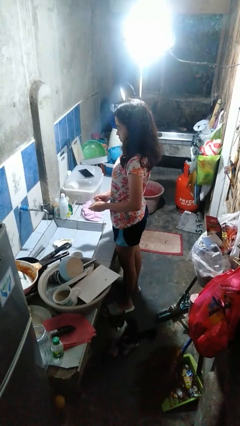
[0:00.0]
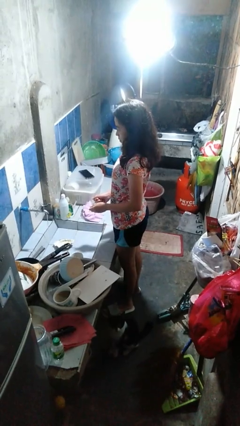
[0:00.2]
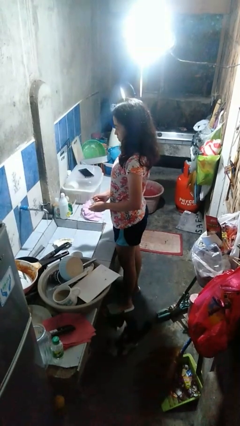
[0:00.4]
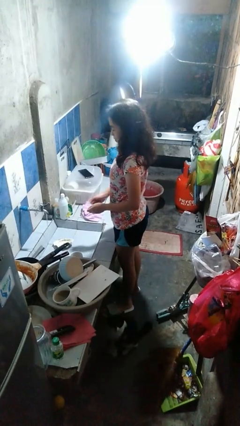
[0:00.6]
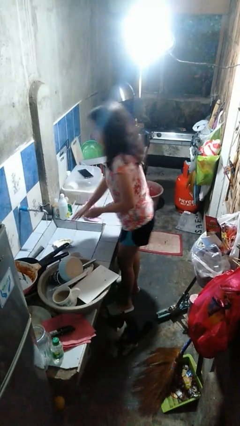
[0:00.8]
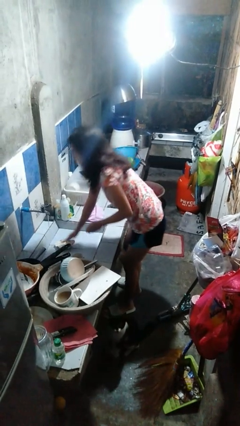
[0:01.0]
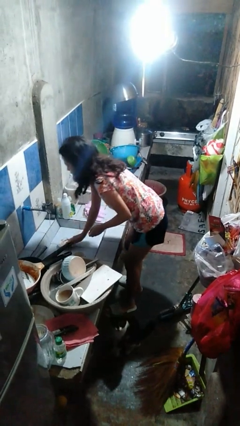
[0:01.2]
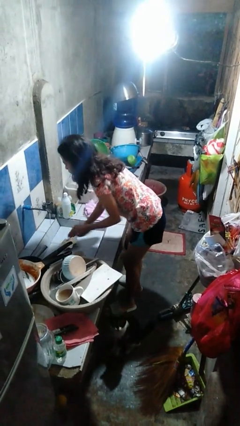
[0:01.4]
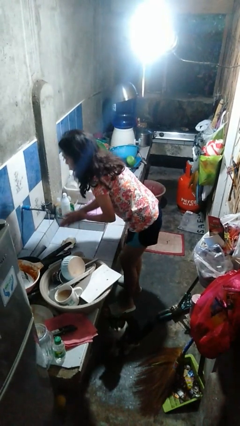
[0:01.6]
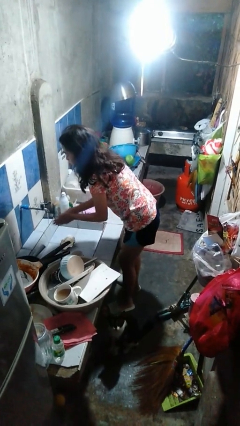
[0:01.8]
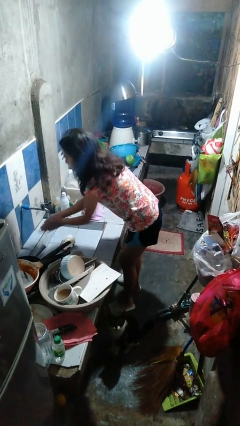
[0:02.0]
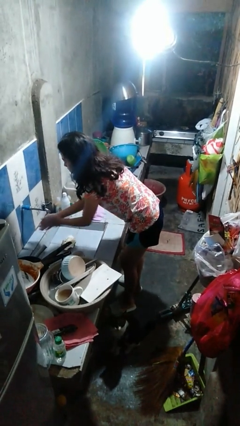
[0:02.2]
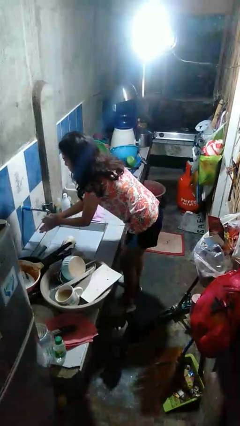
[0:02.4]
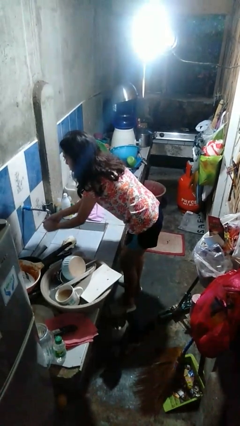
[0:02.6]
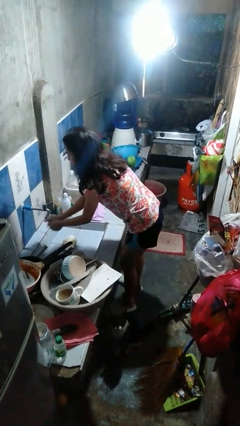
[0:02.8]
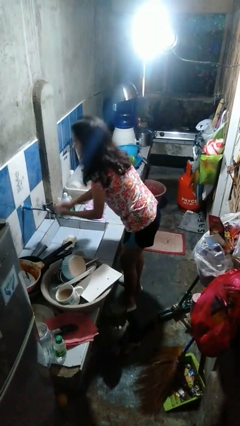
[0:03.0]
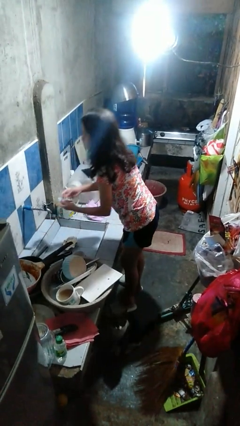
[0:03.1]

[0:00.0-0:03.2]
person washes hands

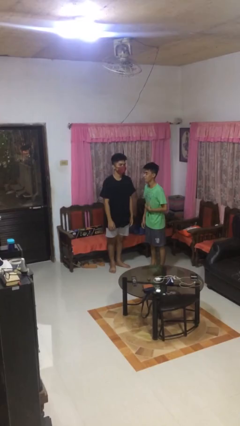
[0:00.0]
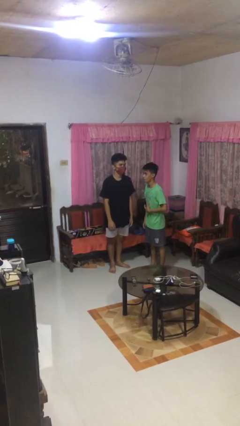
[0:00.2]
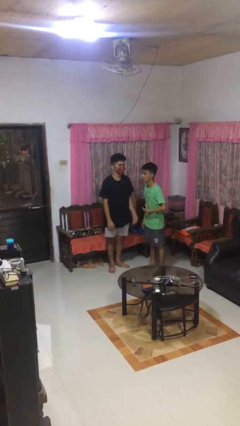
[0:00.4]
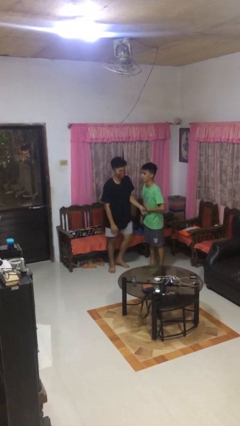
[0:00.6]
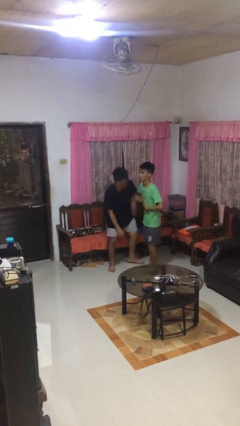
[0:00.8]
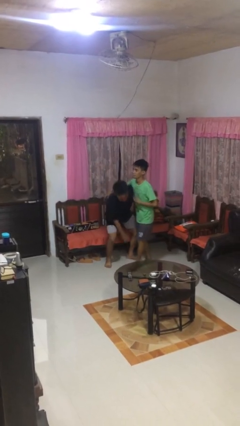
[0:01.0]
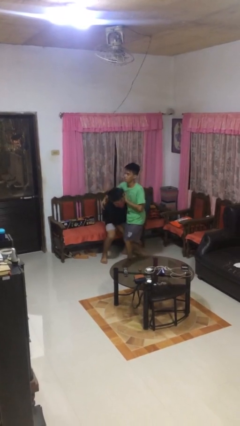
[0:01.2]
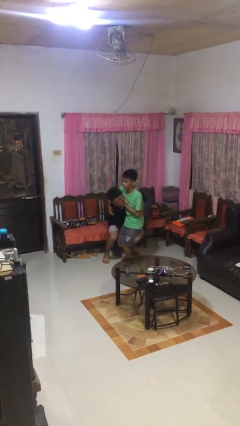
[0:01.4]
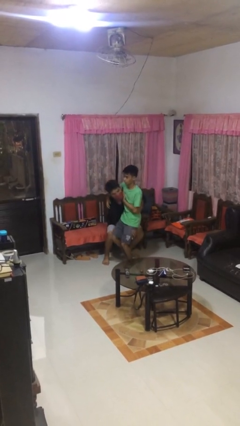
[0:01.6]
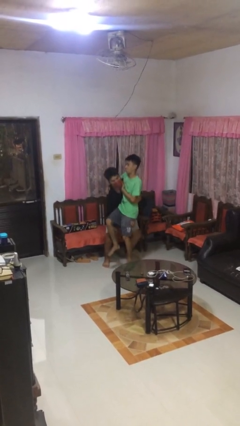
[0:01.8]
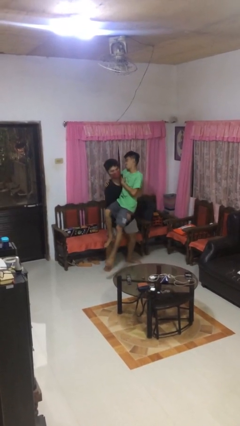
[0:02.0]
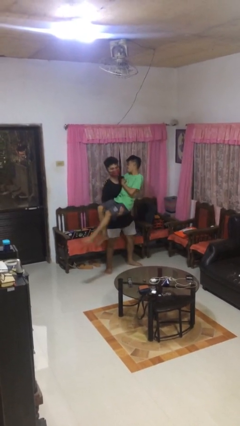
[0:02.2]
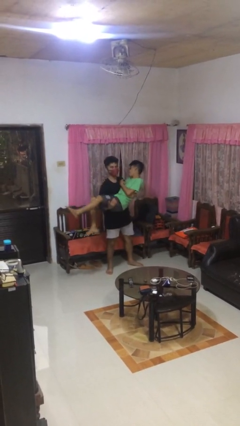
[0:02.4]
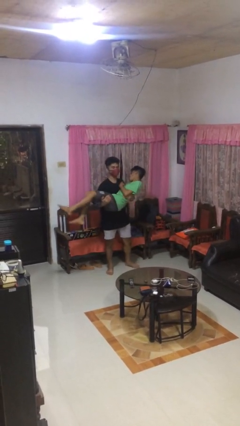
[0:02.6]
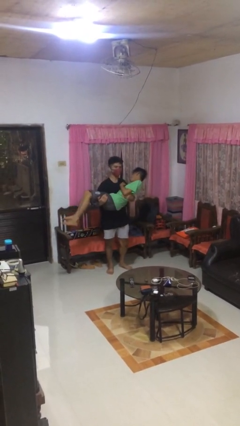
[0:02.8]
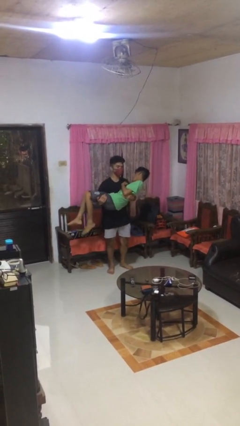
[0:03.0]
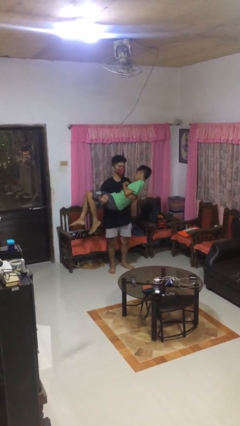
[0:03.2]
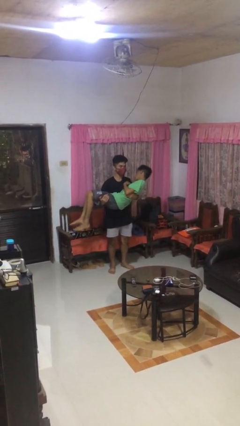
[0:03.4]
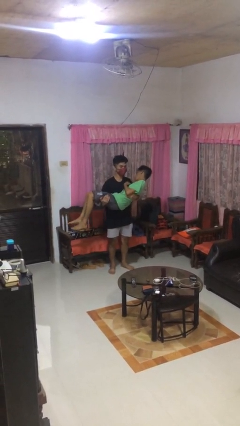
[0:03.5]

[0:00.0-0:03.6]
person picks up person

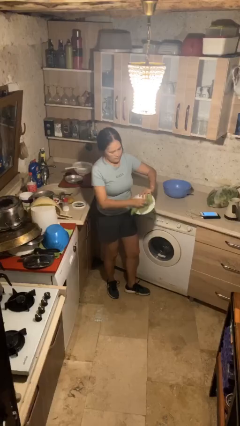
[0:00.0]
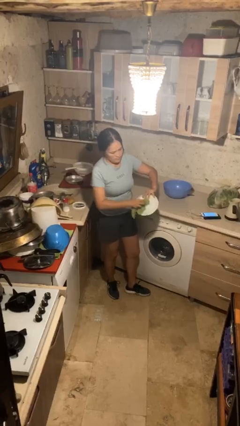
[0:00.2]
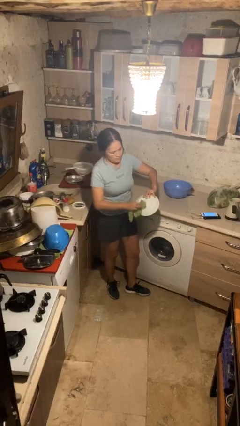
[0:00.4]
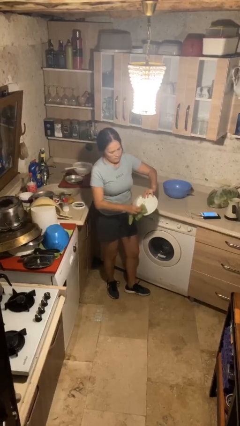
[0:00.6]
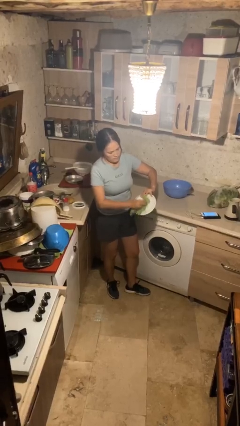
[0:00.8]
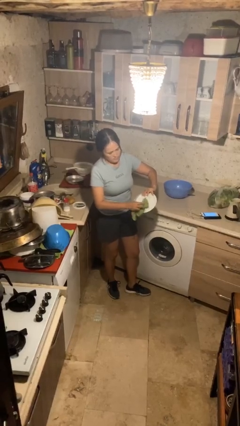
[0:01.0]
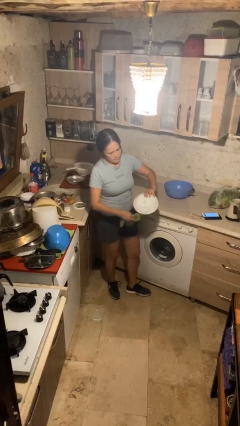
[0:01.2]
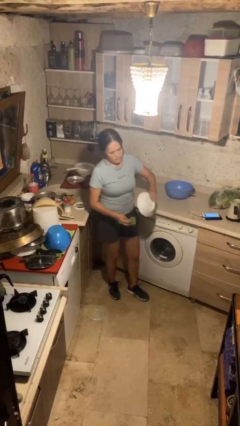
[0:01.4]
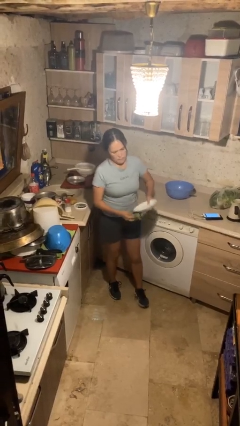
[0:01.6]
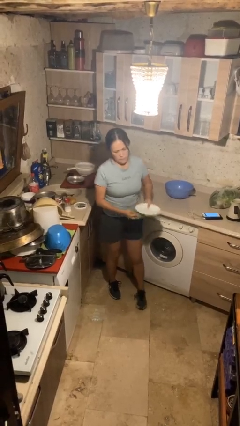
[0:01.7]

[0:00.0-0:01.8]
person dries dish

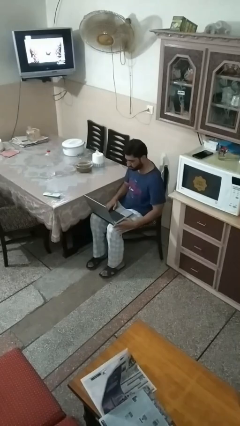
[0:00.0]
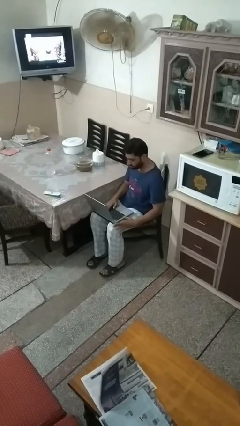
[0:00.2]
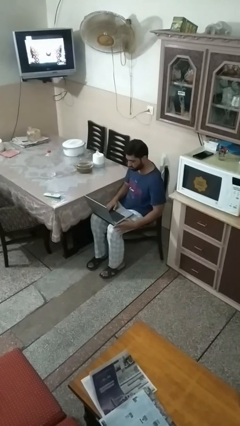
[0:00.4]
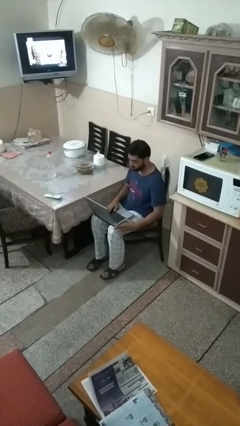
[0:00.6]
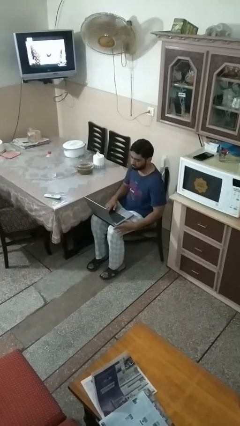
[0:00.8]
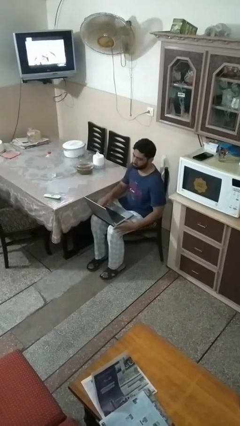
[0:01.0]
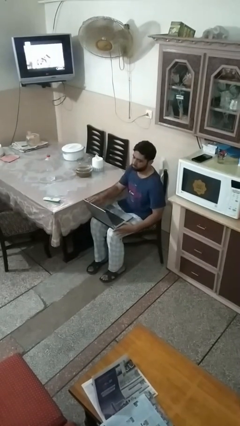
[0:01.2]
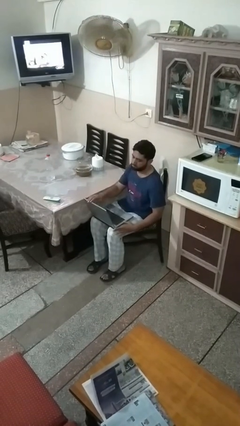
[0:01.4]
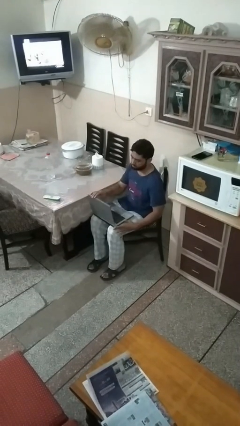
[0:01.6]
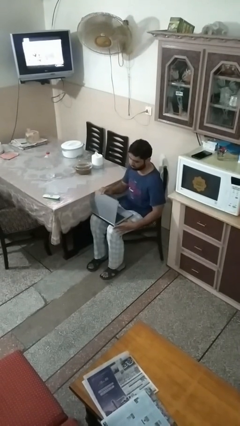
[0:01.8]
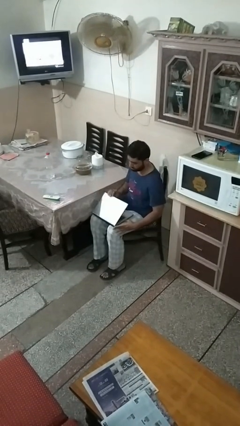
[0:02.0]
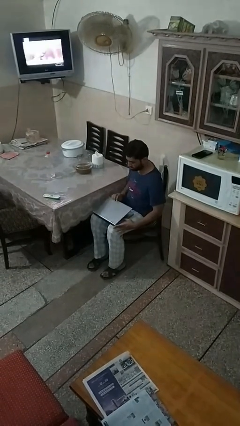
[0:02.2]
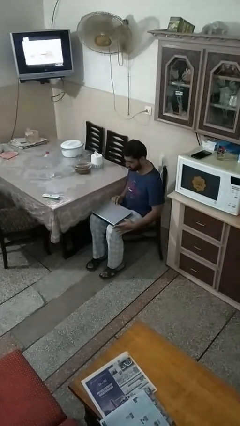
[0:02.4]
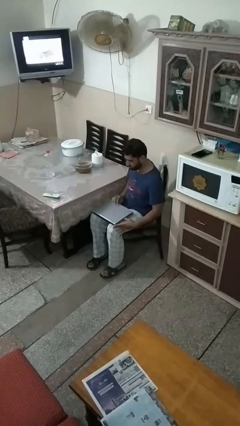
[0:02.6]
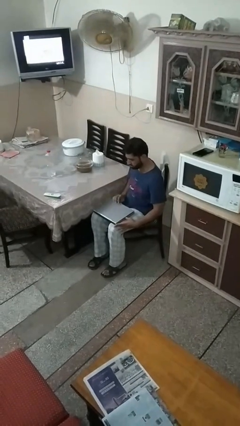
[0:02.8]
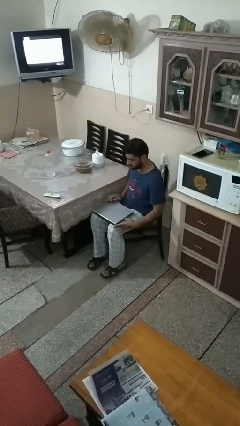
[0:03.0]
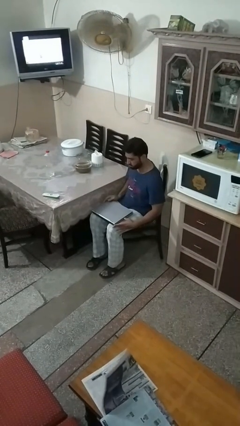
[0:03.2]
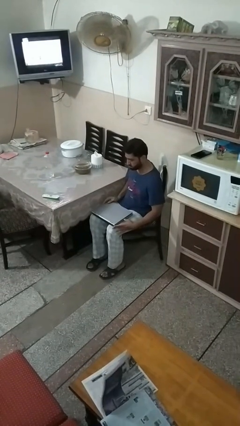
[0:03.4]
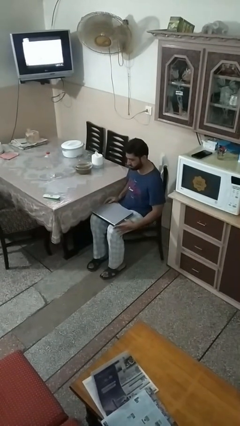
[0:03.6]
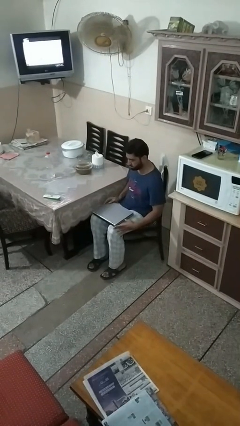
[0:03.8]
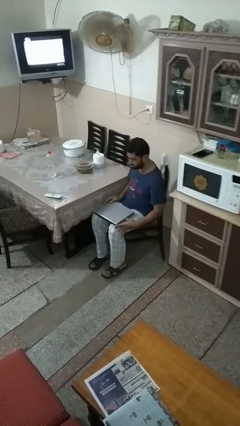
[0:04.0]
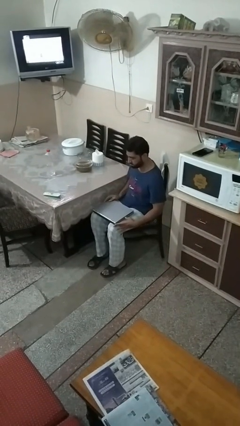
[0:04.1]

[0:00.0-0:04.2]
person closes laptop

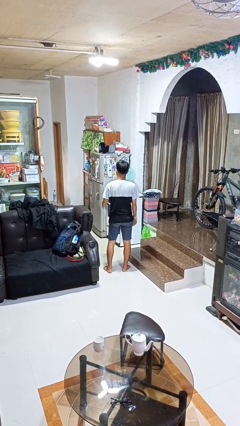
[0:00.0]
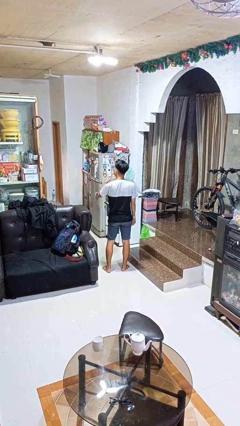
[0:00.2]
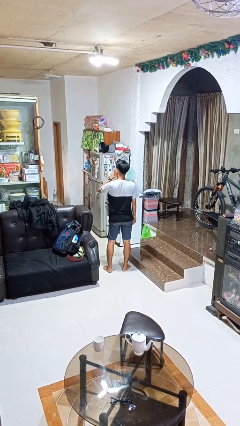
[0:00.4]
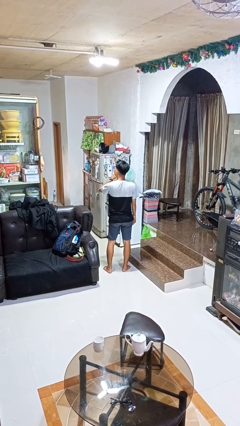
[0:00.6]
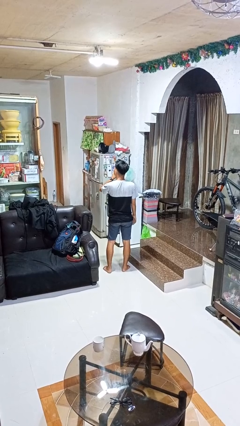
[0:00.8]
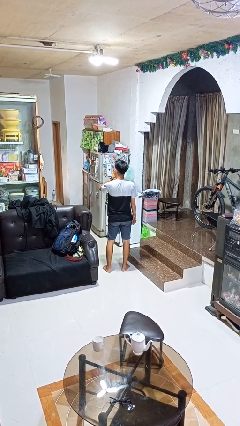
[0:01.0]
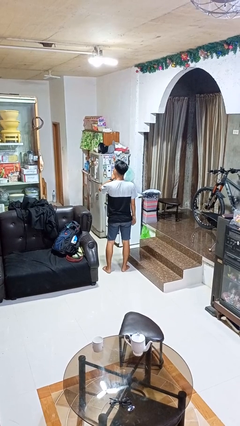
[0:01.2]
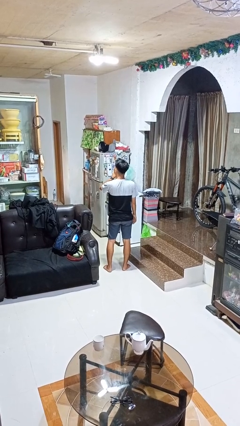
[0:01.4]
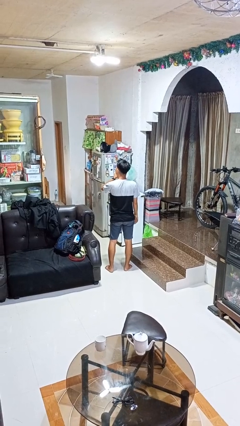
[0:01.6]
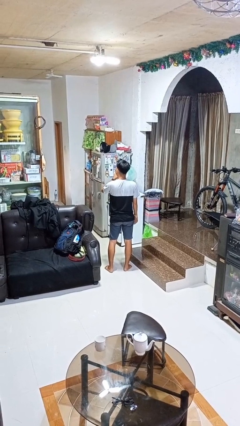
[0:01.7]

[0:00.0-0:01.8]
person gestures be quiet

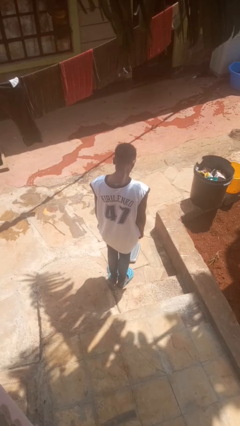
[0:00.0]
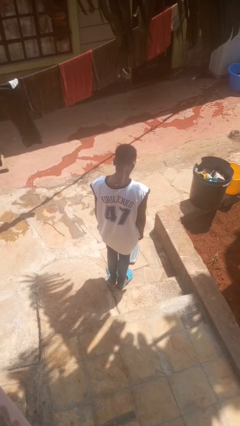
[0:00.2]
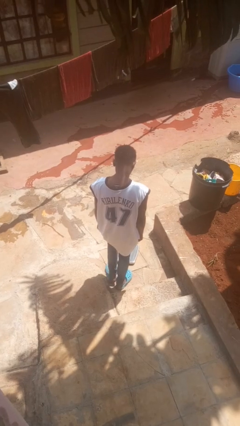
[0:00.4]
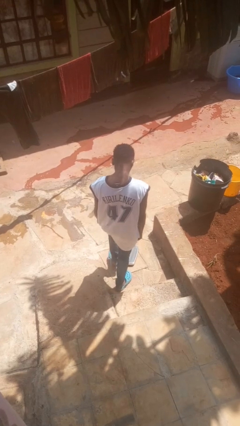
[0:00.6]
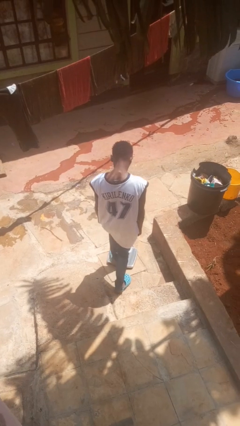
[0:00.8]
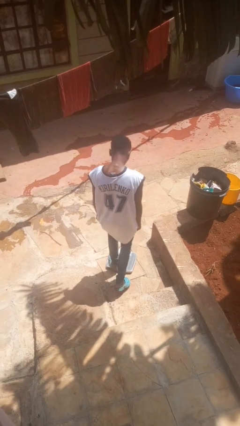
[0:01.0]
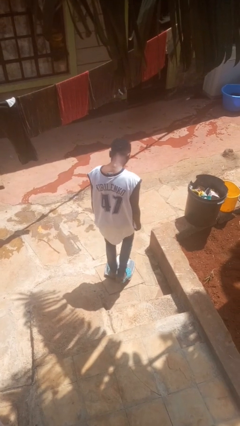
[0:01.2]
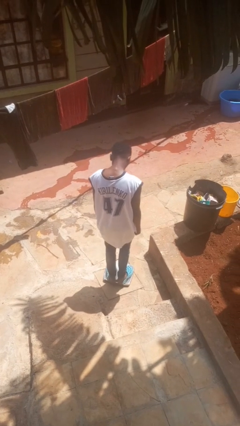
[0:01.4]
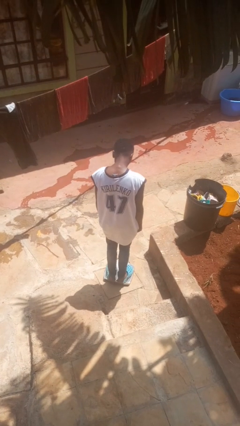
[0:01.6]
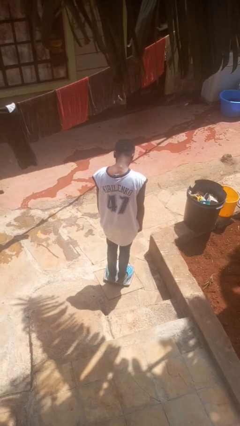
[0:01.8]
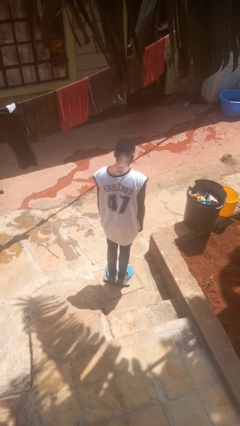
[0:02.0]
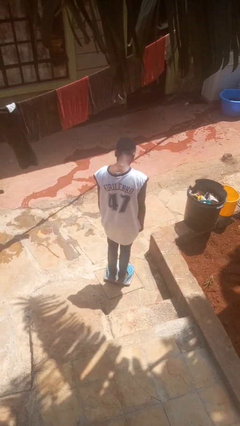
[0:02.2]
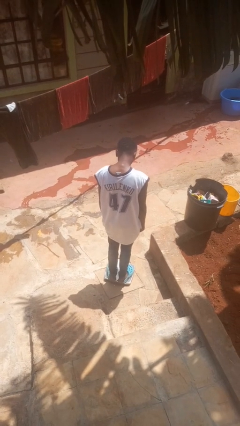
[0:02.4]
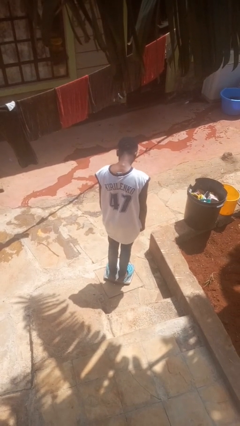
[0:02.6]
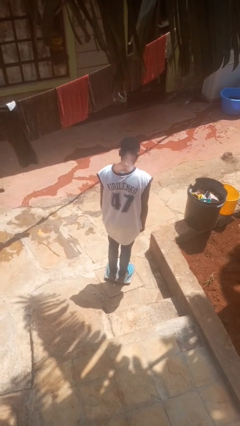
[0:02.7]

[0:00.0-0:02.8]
person uses bodyweight scale
